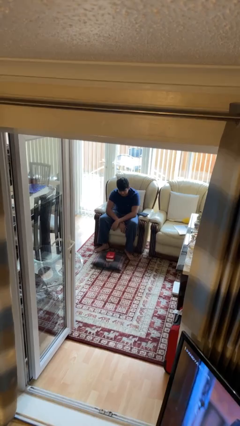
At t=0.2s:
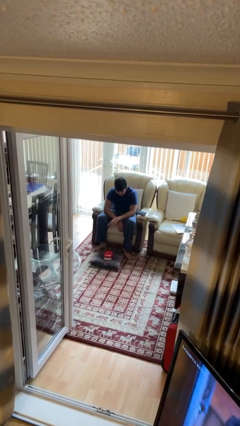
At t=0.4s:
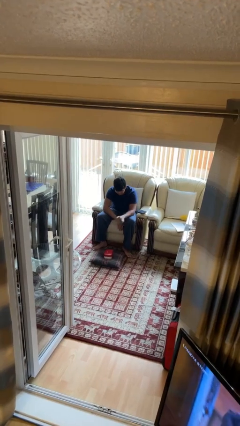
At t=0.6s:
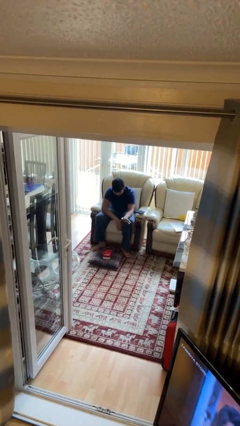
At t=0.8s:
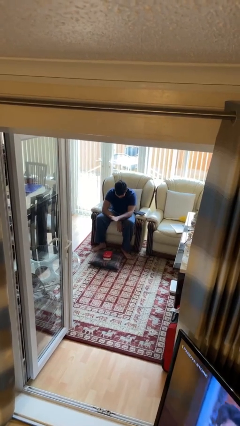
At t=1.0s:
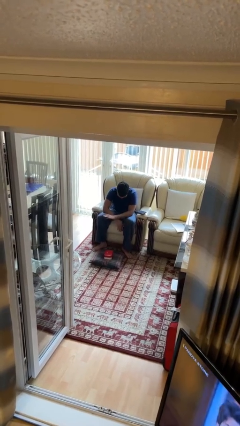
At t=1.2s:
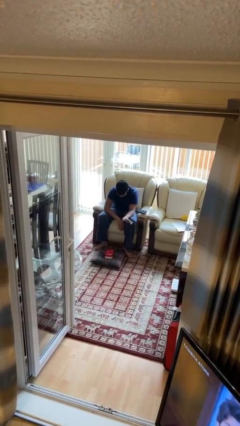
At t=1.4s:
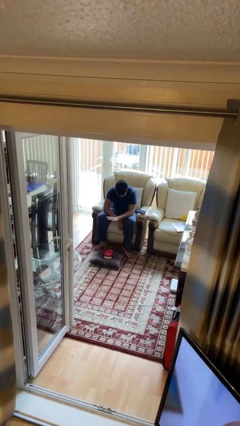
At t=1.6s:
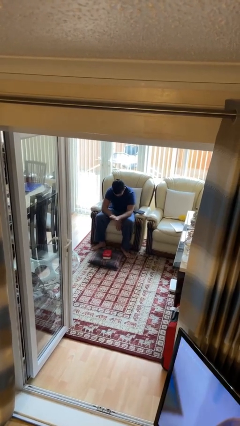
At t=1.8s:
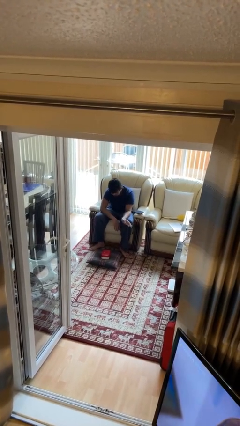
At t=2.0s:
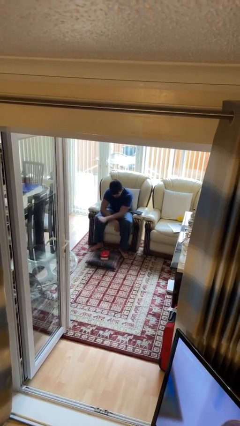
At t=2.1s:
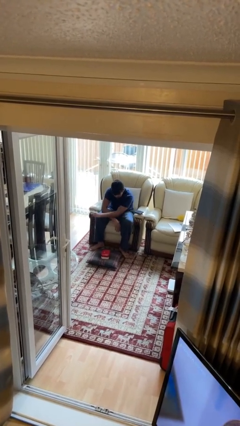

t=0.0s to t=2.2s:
person waves hand over object

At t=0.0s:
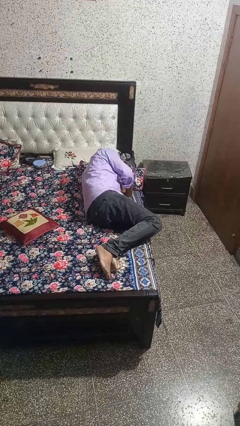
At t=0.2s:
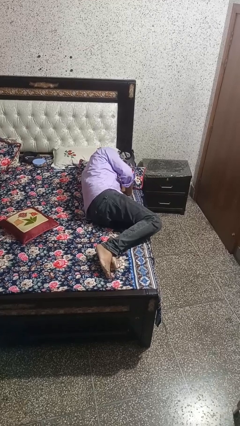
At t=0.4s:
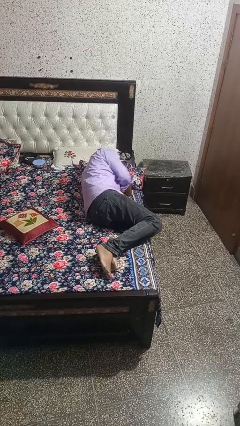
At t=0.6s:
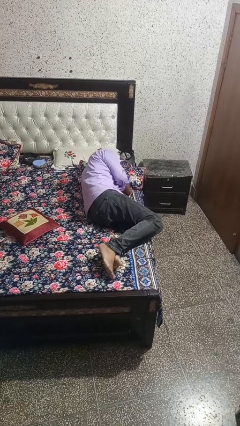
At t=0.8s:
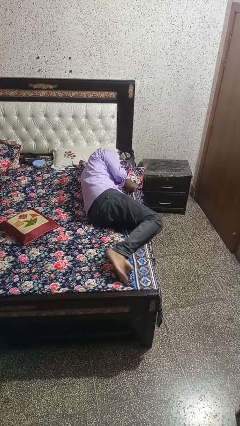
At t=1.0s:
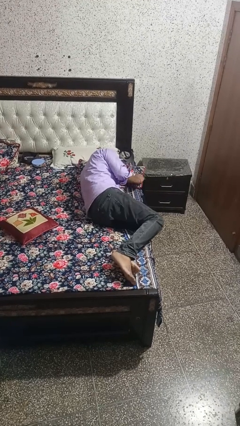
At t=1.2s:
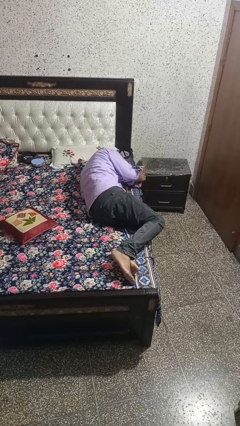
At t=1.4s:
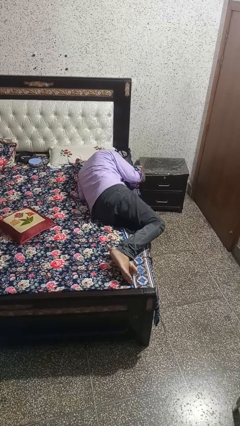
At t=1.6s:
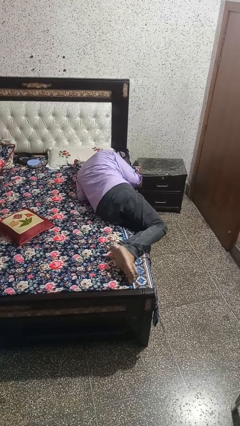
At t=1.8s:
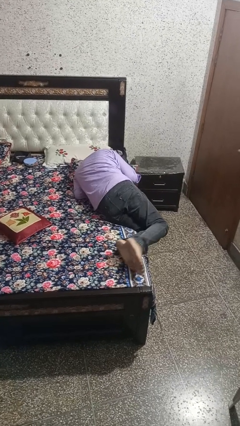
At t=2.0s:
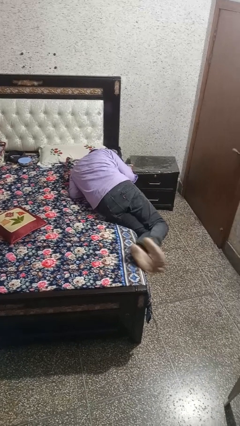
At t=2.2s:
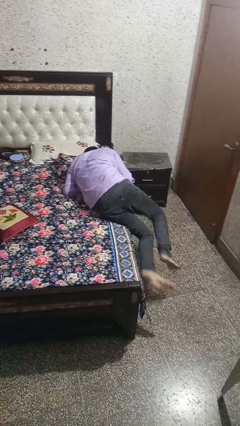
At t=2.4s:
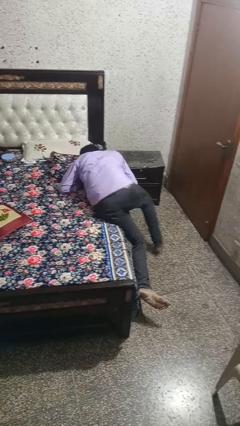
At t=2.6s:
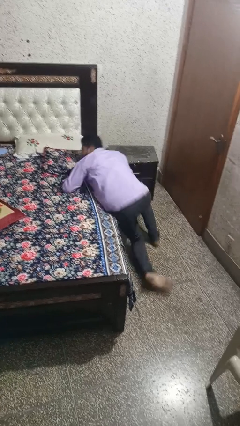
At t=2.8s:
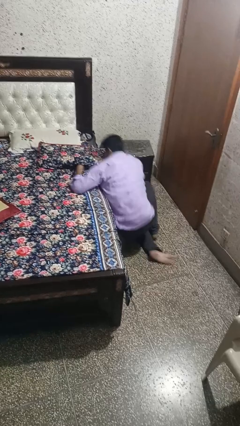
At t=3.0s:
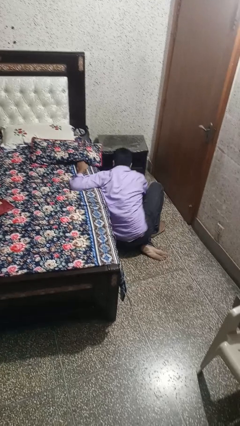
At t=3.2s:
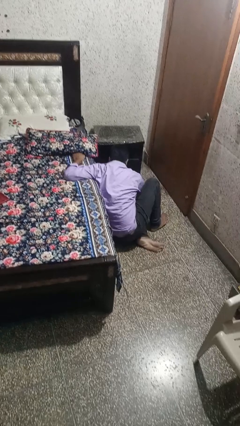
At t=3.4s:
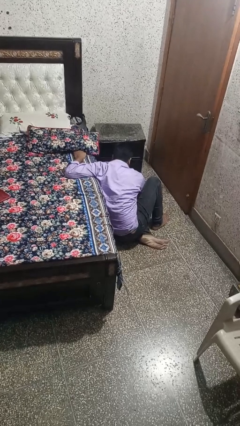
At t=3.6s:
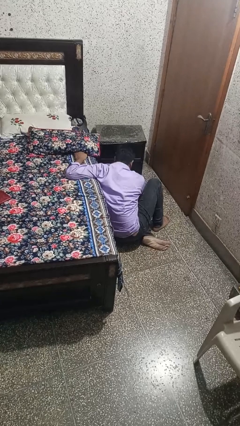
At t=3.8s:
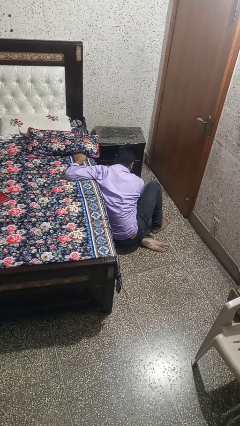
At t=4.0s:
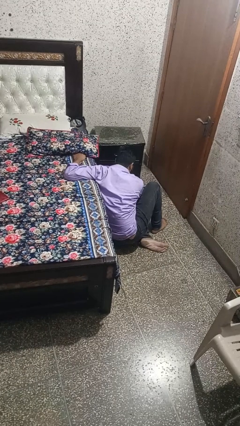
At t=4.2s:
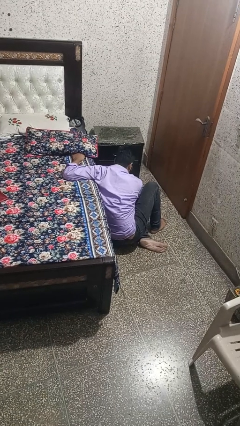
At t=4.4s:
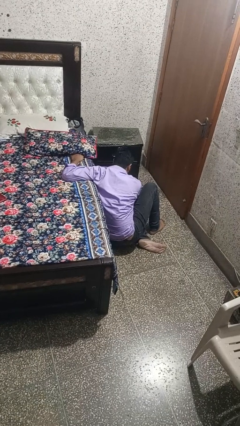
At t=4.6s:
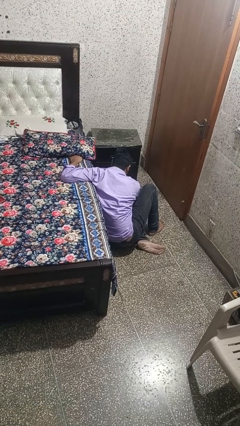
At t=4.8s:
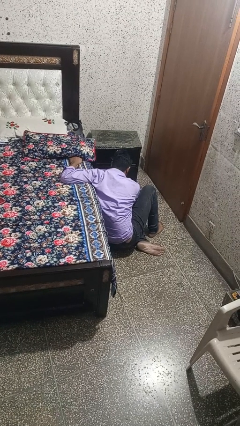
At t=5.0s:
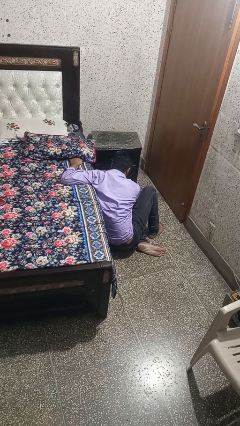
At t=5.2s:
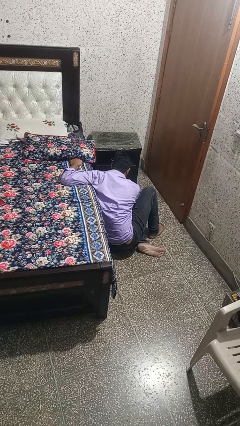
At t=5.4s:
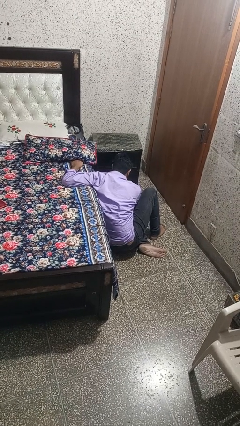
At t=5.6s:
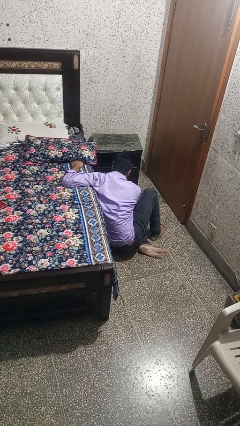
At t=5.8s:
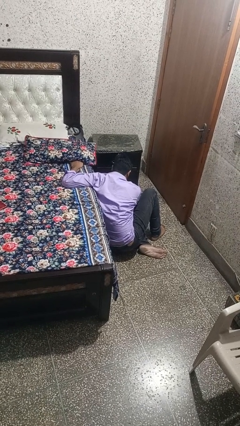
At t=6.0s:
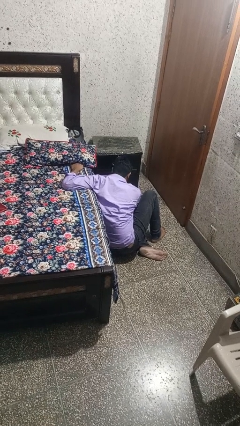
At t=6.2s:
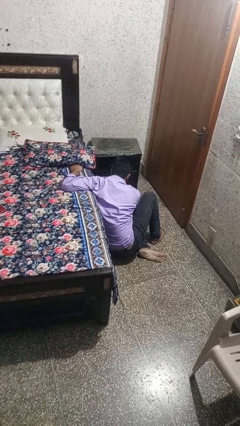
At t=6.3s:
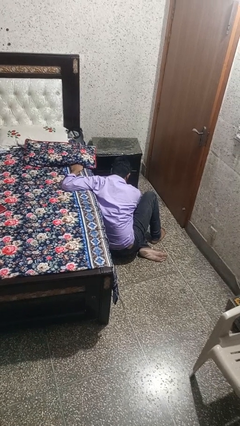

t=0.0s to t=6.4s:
person falls from bed

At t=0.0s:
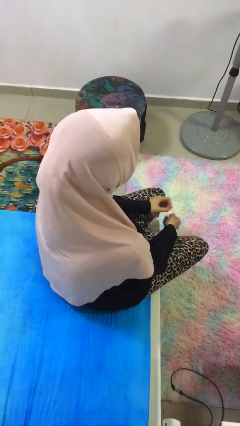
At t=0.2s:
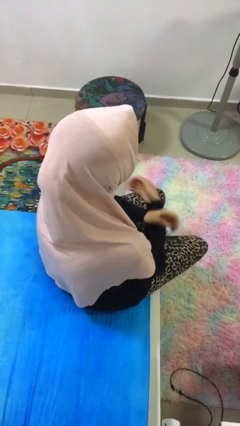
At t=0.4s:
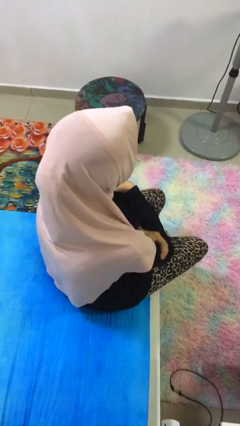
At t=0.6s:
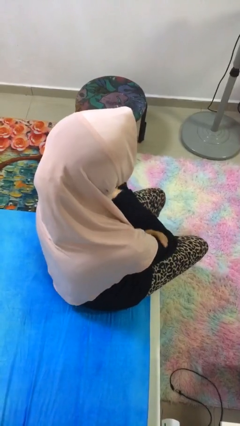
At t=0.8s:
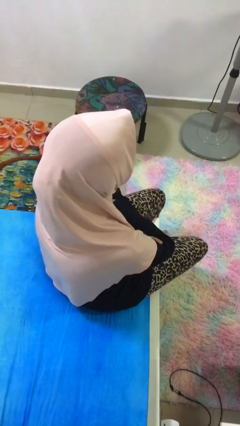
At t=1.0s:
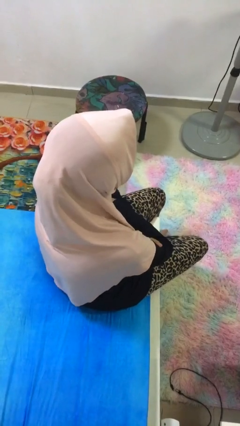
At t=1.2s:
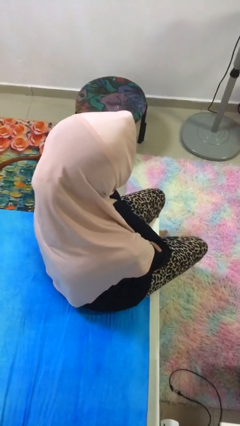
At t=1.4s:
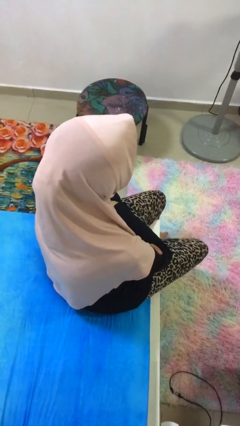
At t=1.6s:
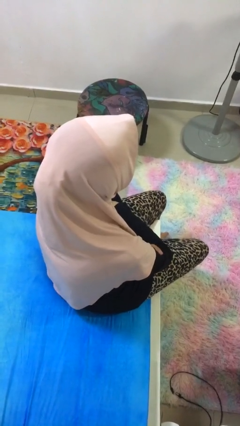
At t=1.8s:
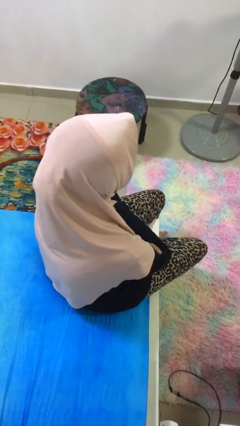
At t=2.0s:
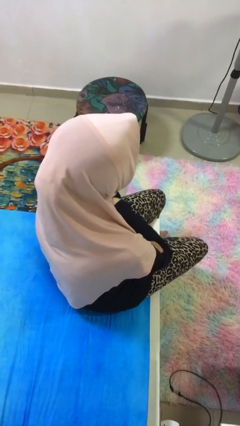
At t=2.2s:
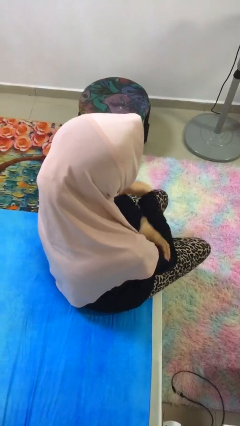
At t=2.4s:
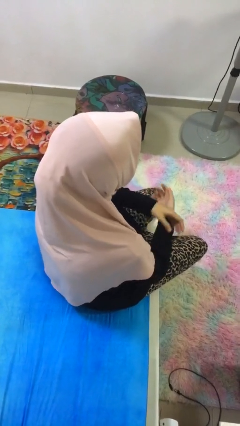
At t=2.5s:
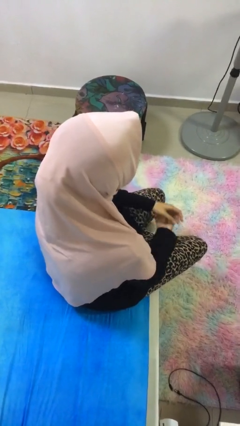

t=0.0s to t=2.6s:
person crosses arms

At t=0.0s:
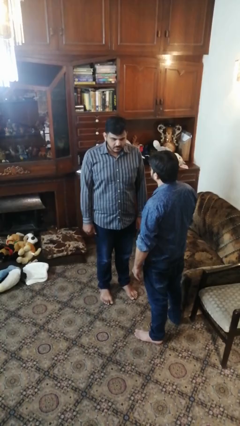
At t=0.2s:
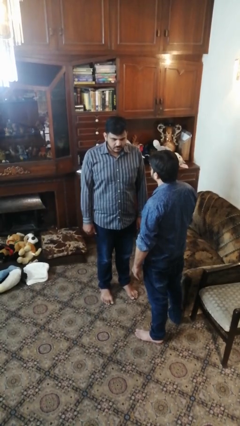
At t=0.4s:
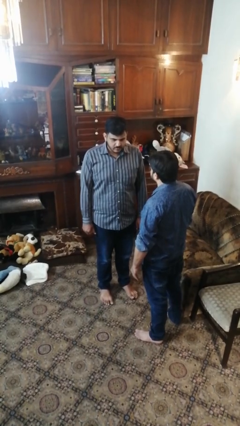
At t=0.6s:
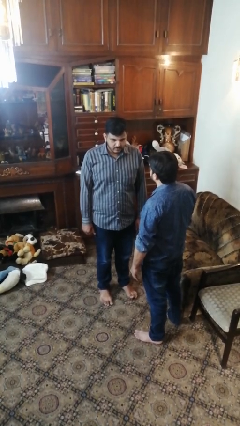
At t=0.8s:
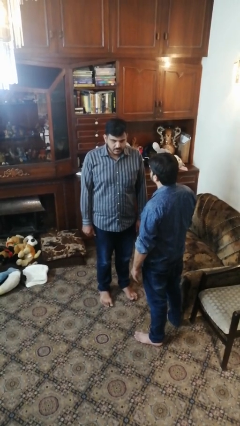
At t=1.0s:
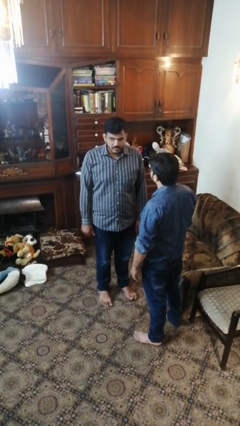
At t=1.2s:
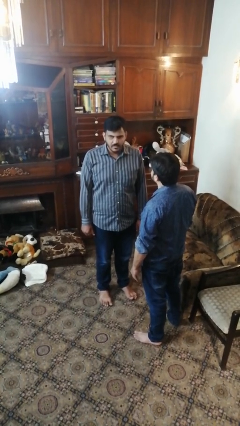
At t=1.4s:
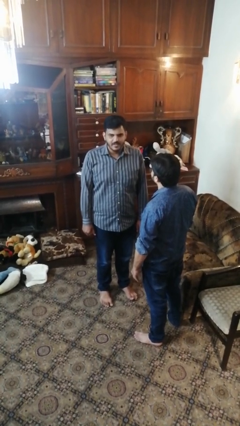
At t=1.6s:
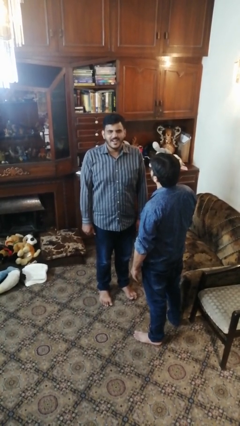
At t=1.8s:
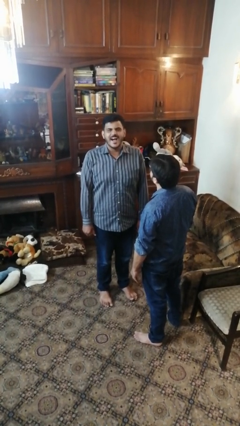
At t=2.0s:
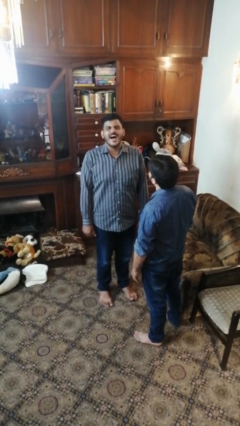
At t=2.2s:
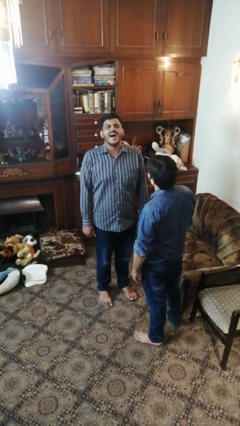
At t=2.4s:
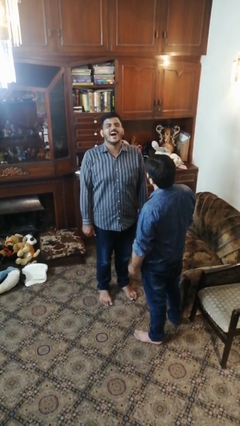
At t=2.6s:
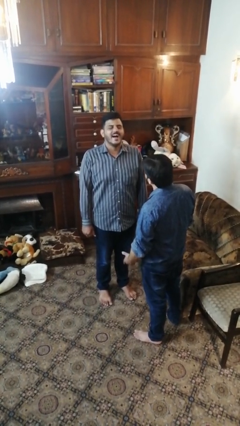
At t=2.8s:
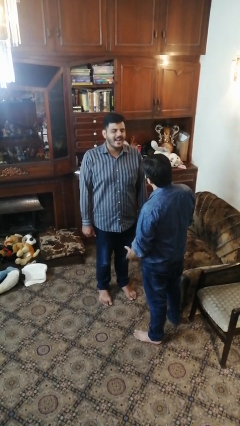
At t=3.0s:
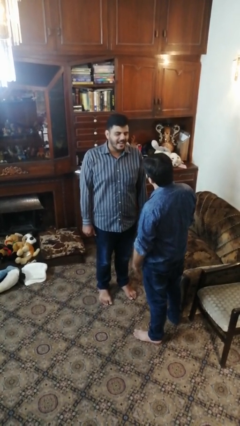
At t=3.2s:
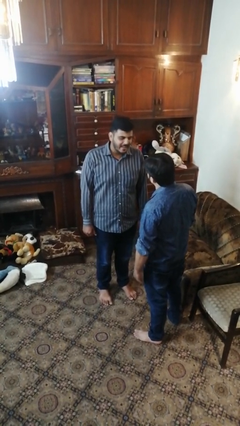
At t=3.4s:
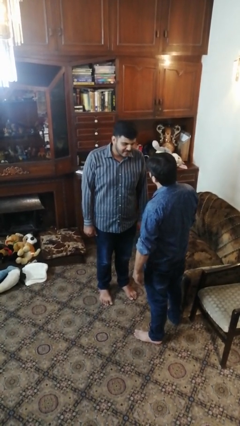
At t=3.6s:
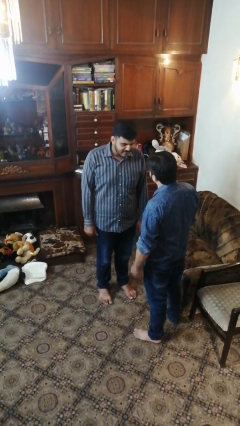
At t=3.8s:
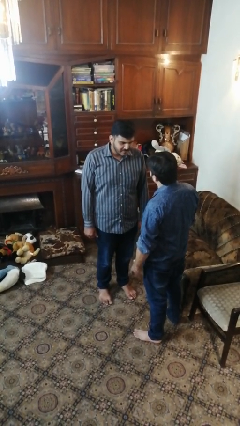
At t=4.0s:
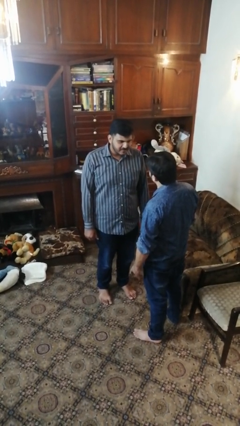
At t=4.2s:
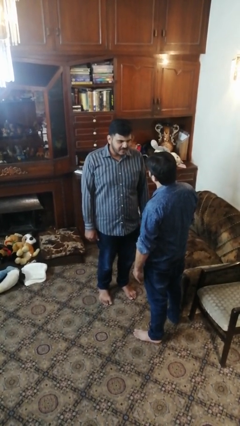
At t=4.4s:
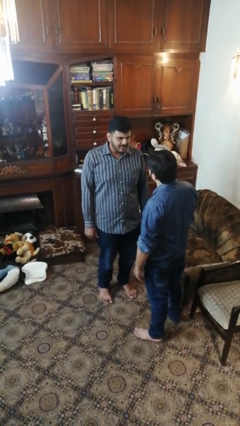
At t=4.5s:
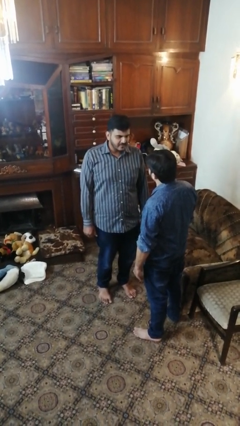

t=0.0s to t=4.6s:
person laughs with person

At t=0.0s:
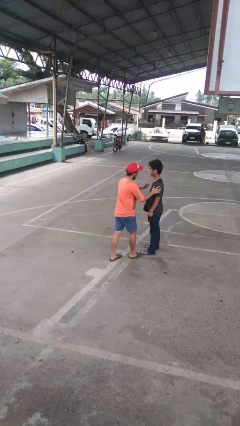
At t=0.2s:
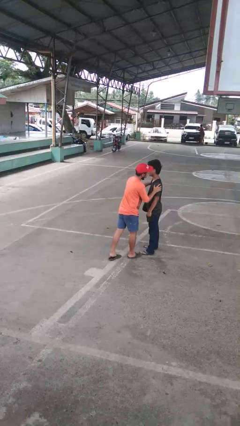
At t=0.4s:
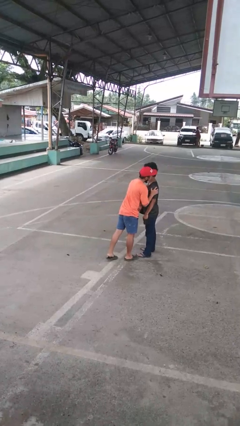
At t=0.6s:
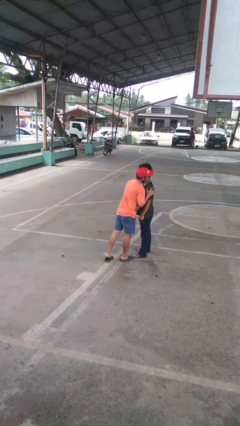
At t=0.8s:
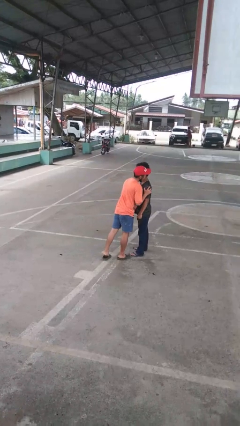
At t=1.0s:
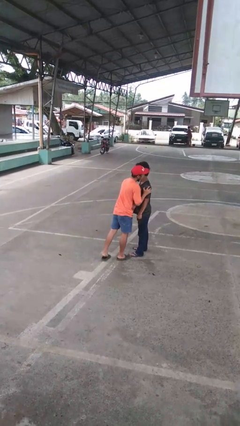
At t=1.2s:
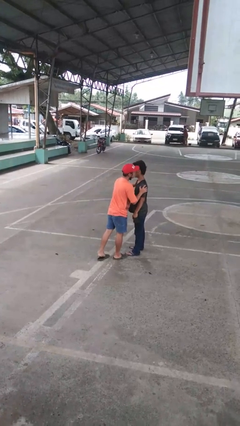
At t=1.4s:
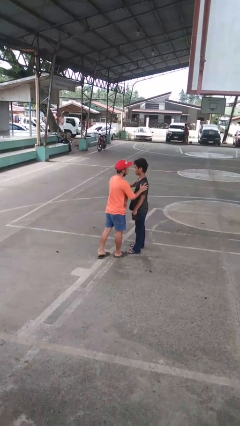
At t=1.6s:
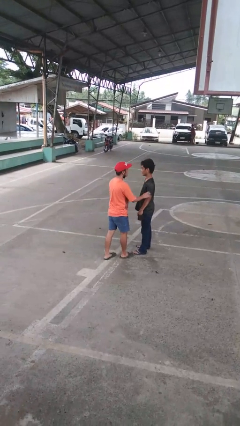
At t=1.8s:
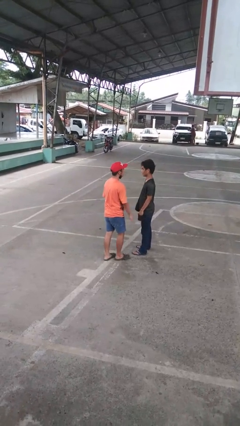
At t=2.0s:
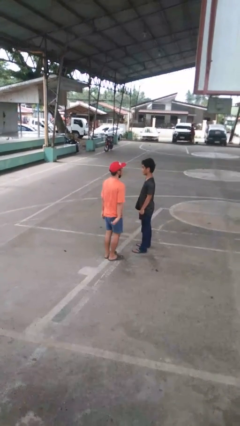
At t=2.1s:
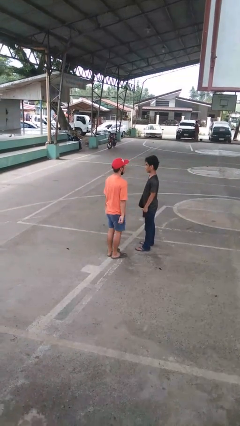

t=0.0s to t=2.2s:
person kisses cheek of person
